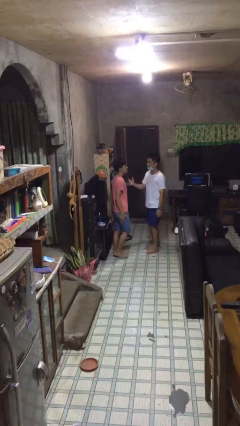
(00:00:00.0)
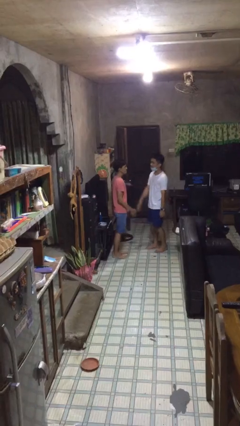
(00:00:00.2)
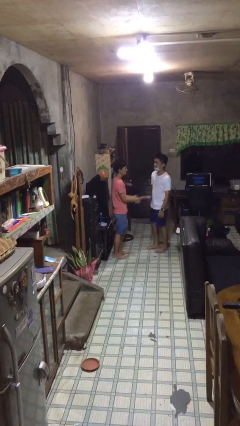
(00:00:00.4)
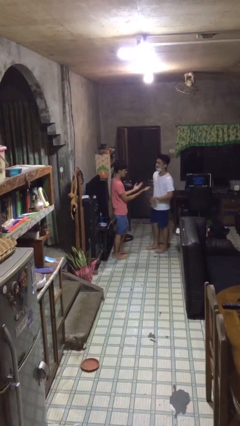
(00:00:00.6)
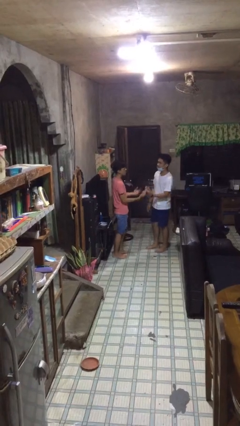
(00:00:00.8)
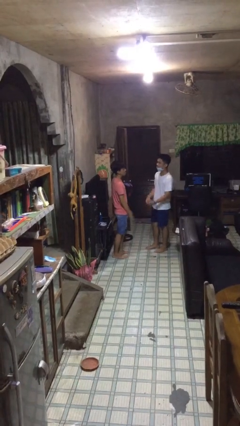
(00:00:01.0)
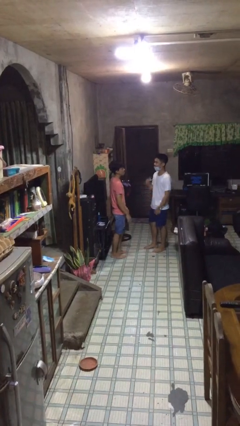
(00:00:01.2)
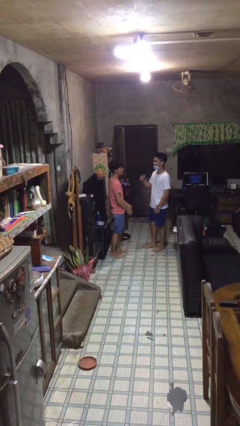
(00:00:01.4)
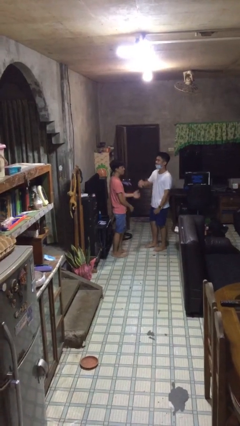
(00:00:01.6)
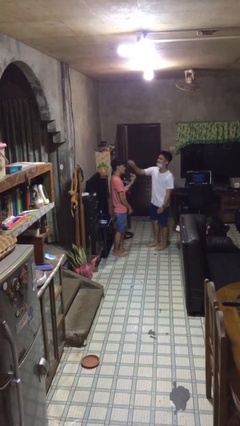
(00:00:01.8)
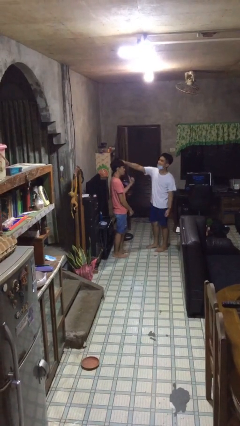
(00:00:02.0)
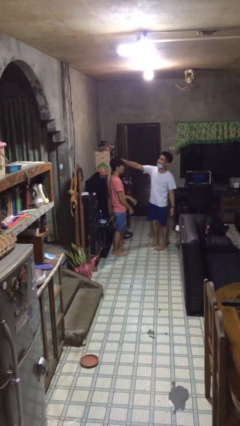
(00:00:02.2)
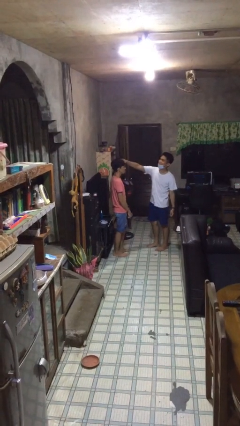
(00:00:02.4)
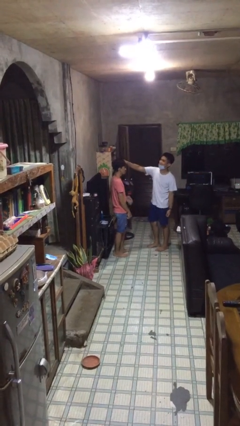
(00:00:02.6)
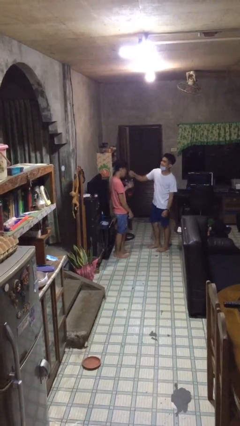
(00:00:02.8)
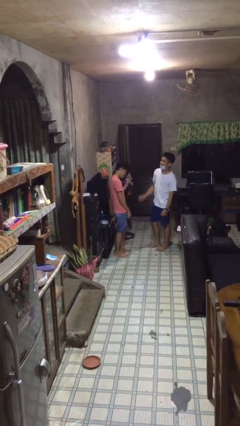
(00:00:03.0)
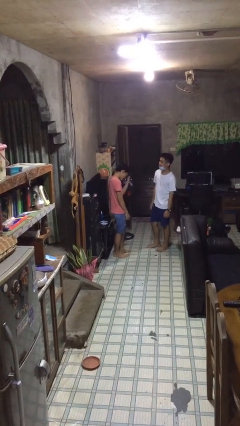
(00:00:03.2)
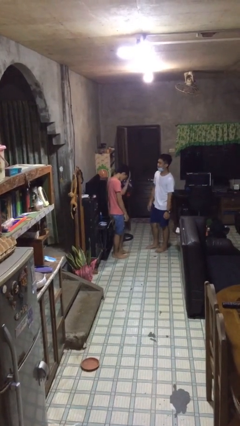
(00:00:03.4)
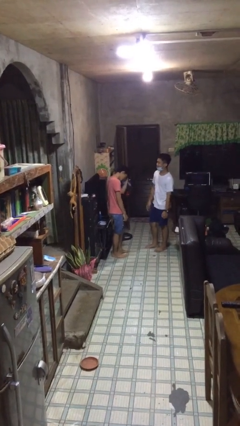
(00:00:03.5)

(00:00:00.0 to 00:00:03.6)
person talks to person

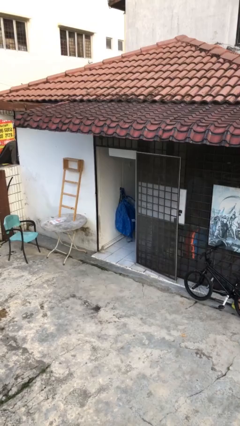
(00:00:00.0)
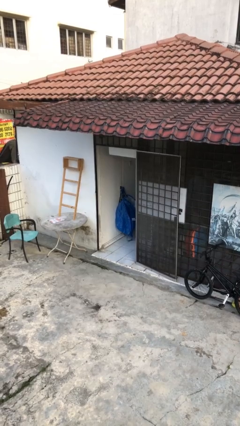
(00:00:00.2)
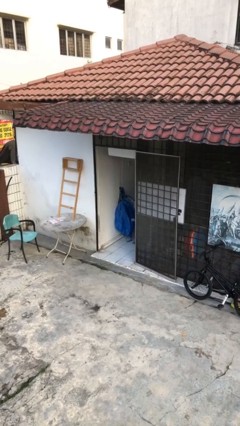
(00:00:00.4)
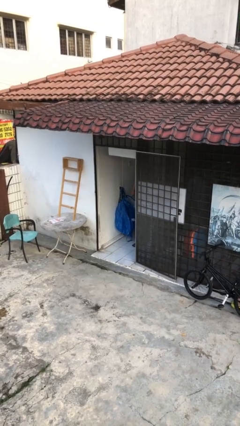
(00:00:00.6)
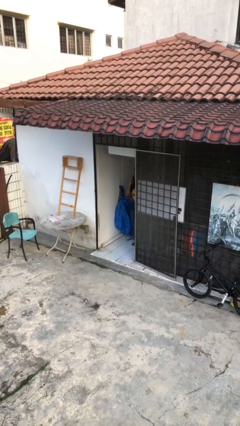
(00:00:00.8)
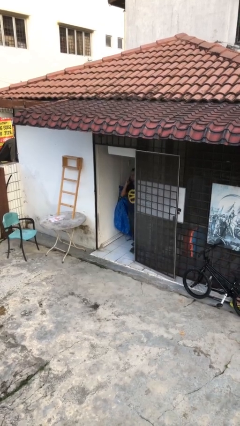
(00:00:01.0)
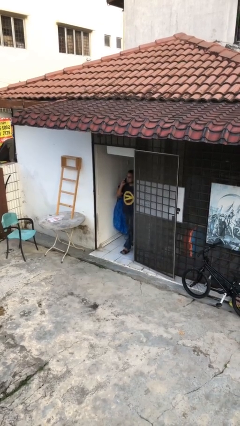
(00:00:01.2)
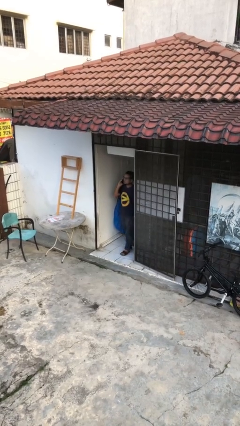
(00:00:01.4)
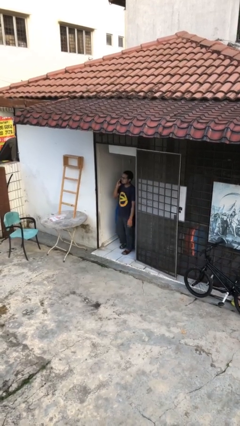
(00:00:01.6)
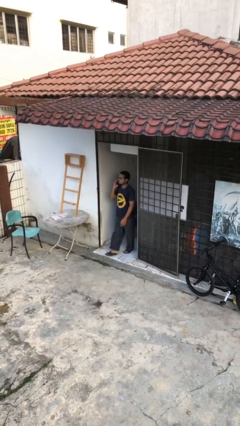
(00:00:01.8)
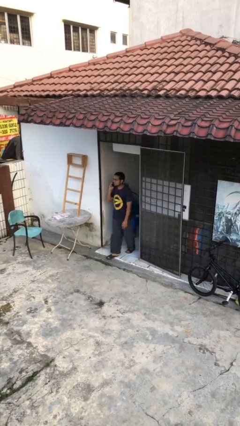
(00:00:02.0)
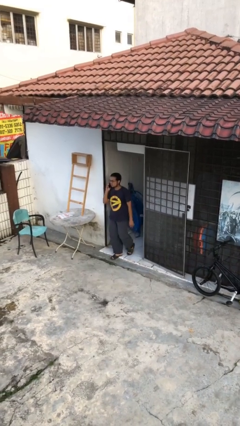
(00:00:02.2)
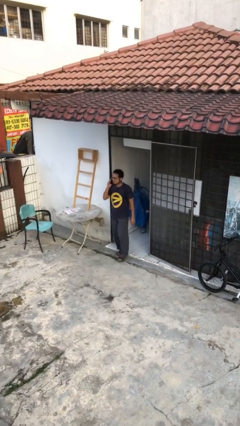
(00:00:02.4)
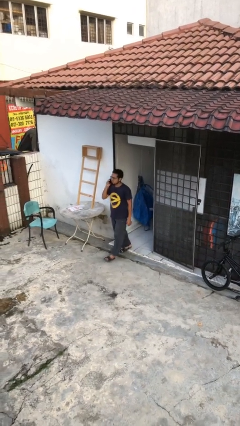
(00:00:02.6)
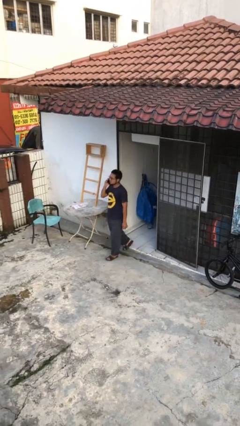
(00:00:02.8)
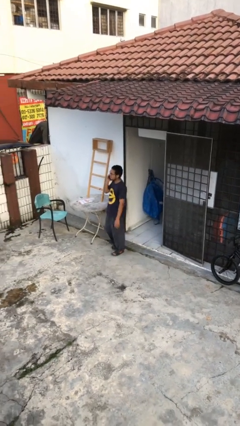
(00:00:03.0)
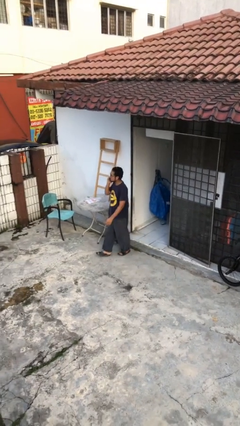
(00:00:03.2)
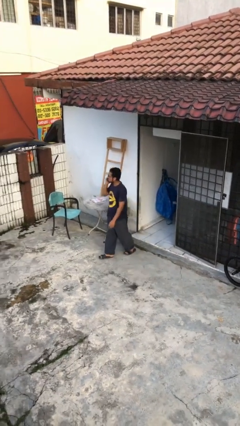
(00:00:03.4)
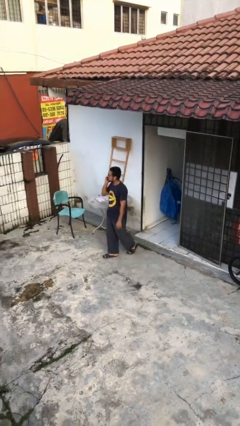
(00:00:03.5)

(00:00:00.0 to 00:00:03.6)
person enters scene through structure

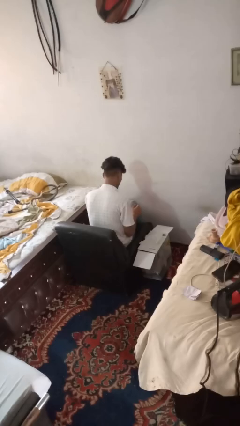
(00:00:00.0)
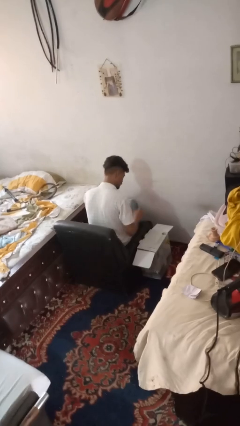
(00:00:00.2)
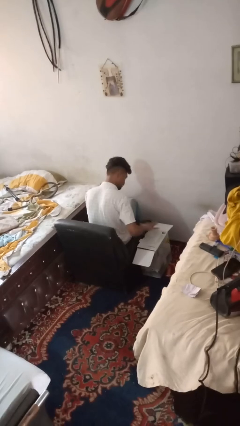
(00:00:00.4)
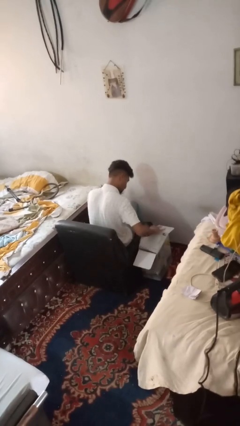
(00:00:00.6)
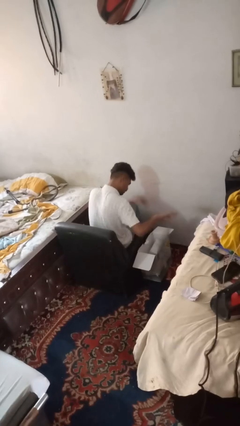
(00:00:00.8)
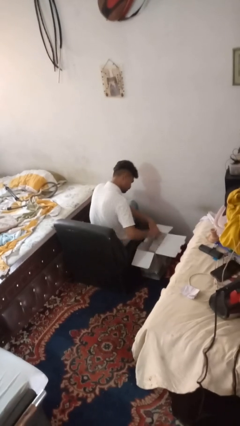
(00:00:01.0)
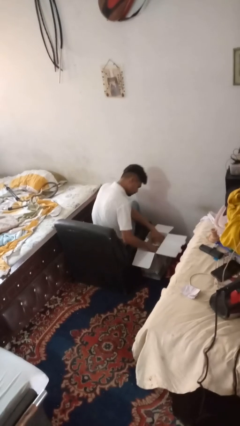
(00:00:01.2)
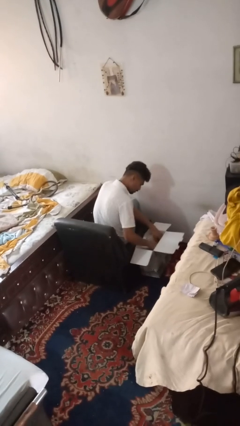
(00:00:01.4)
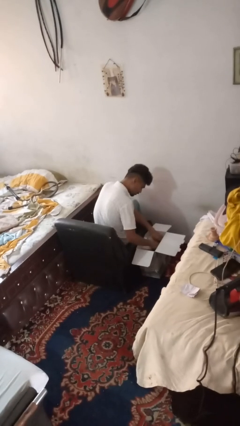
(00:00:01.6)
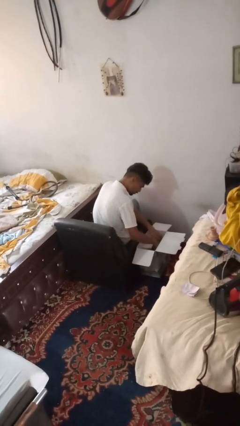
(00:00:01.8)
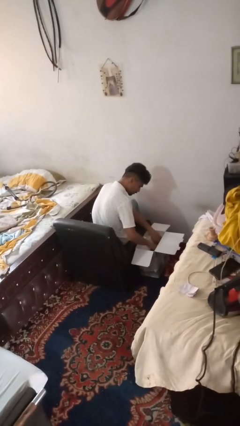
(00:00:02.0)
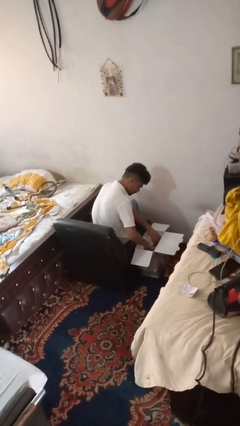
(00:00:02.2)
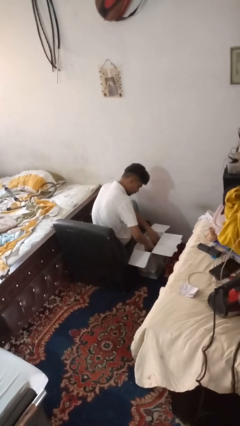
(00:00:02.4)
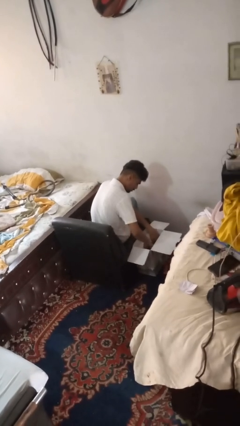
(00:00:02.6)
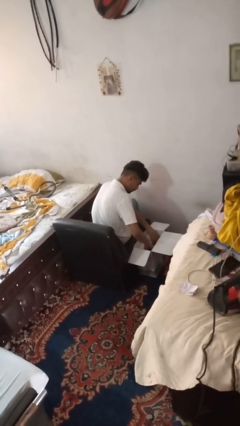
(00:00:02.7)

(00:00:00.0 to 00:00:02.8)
person searches in box

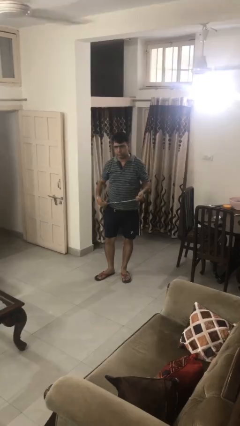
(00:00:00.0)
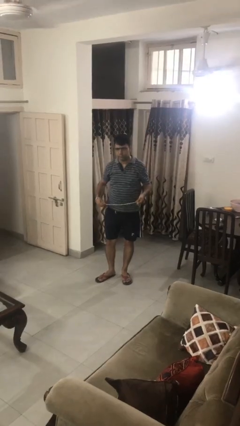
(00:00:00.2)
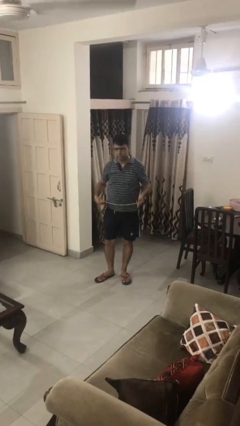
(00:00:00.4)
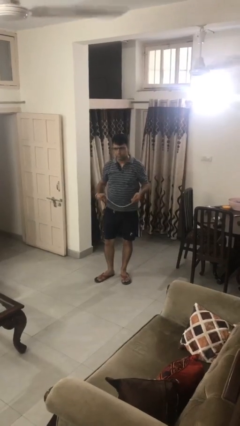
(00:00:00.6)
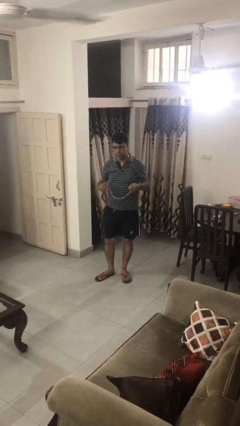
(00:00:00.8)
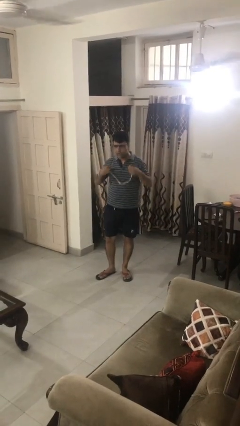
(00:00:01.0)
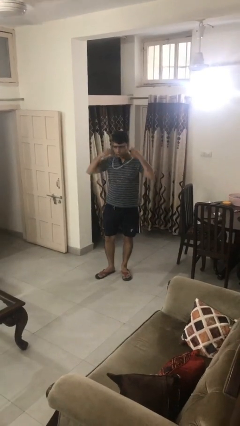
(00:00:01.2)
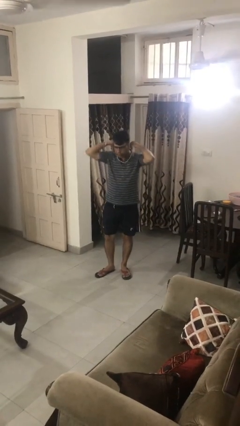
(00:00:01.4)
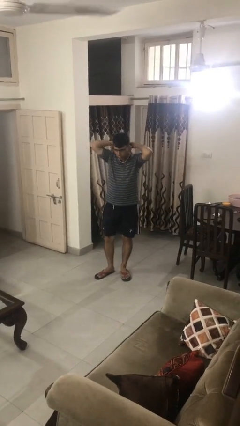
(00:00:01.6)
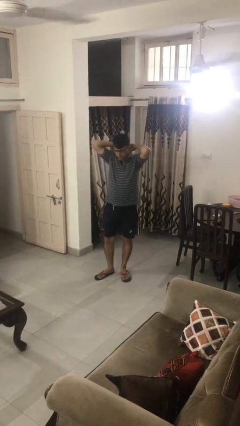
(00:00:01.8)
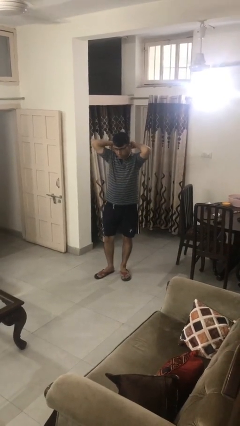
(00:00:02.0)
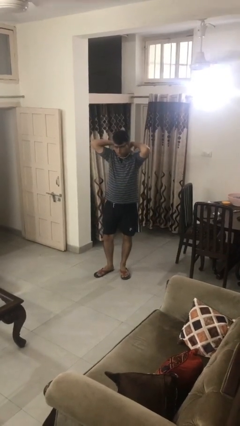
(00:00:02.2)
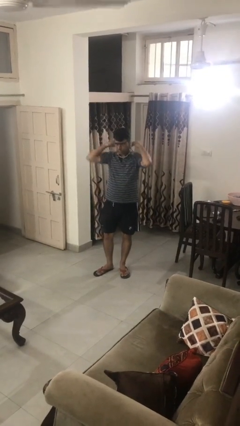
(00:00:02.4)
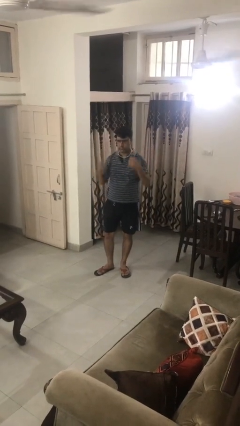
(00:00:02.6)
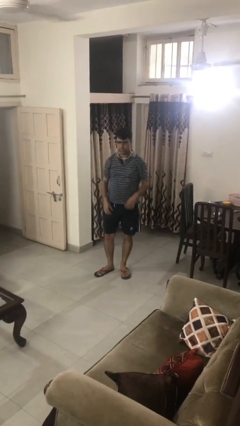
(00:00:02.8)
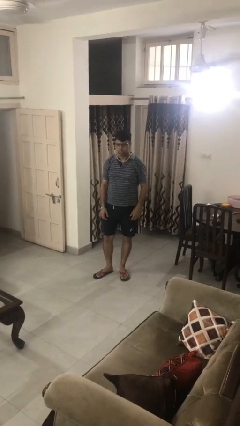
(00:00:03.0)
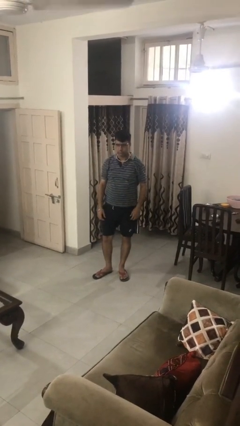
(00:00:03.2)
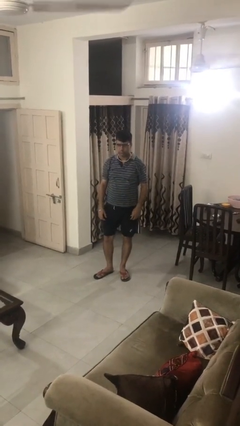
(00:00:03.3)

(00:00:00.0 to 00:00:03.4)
person puts on necklace

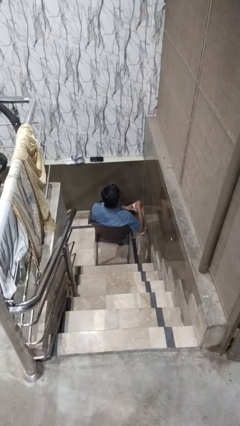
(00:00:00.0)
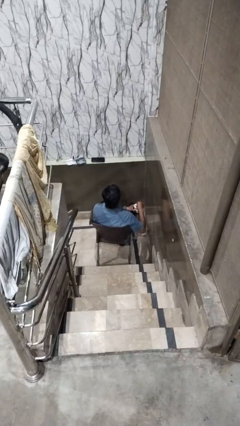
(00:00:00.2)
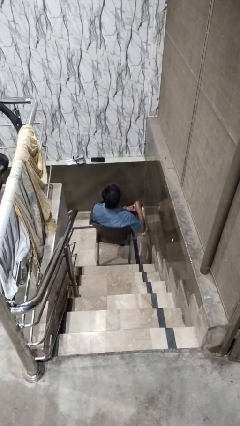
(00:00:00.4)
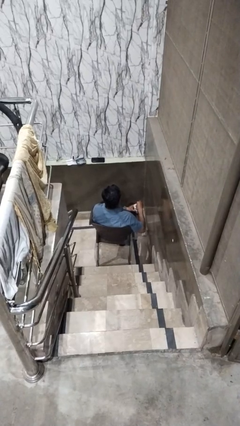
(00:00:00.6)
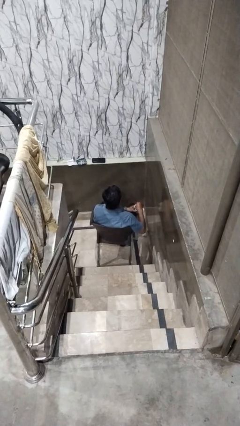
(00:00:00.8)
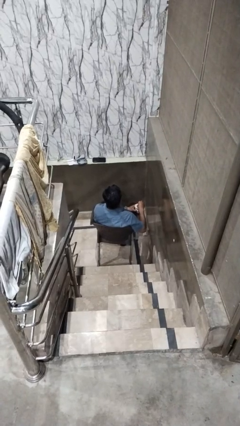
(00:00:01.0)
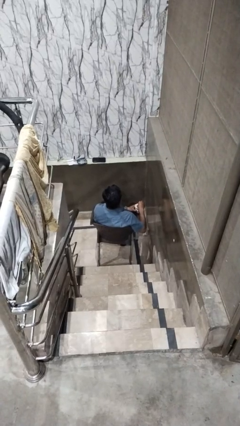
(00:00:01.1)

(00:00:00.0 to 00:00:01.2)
person stirs mug

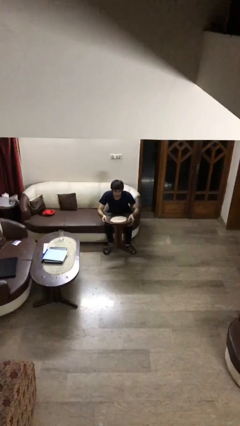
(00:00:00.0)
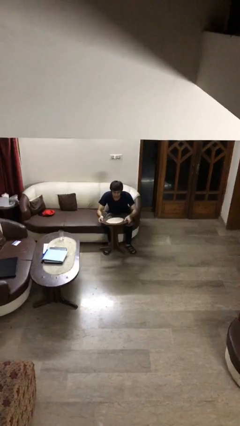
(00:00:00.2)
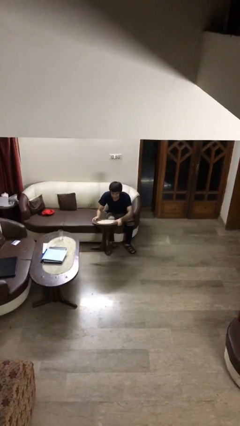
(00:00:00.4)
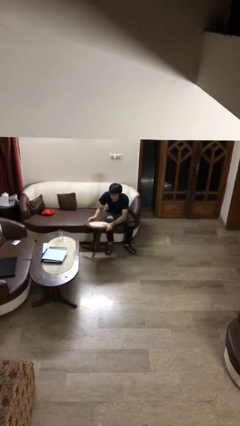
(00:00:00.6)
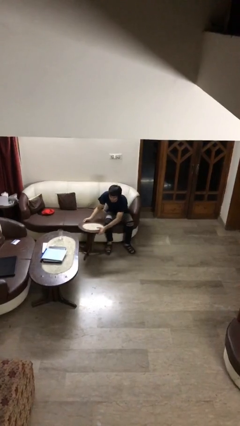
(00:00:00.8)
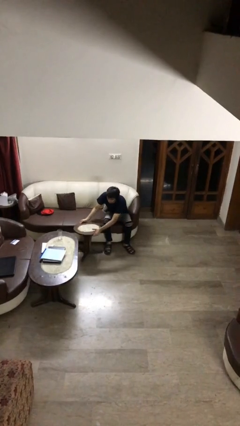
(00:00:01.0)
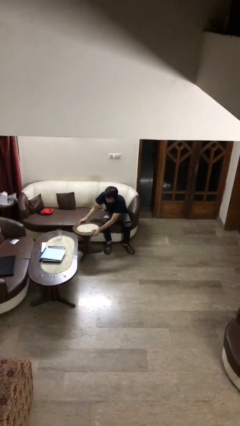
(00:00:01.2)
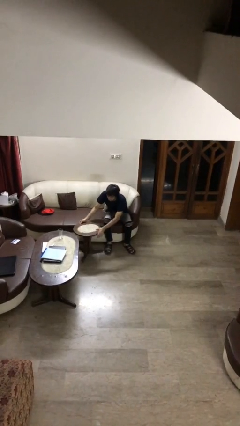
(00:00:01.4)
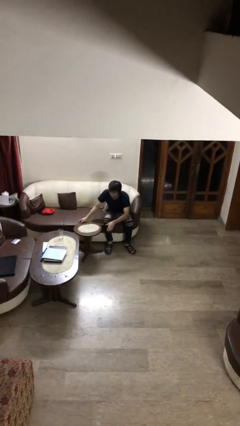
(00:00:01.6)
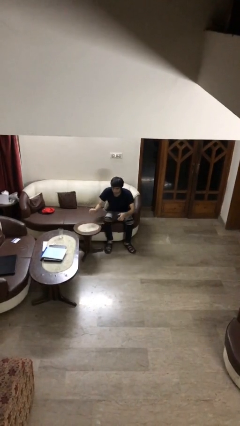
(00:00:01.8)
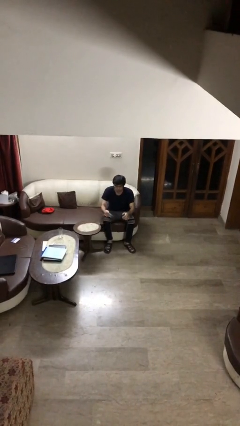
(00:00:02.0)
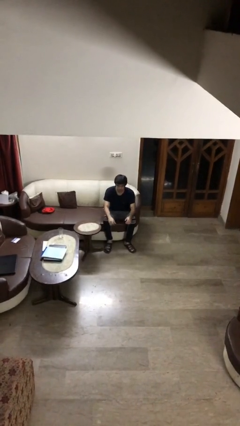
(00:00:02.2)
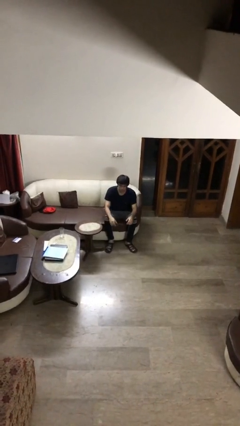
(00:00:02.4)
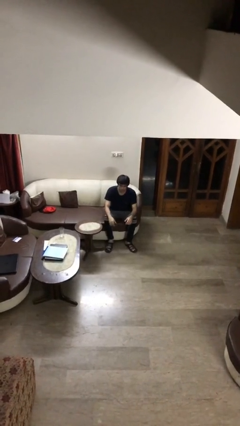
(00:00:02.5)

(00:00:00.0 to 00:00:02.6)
person puts down object on floor
